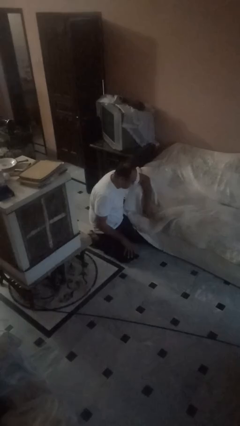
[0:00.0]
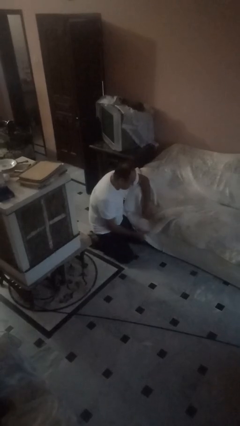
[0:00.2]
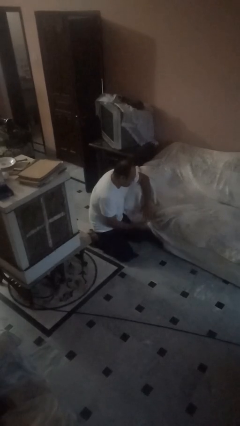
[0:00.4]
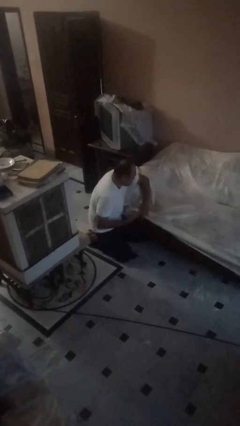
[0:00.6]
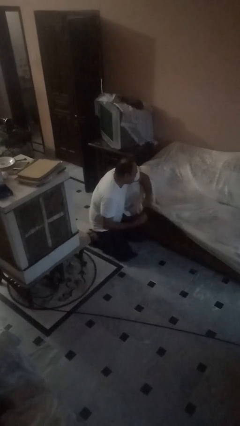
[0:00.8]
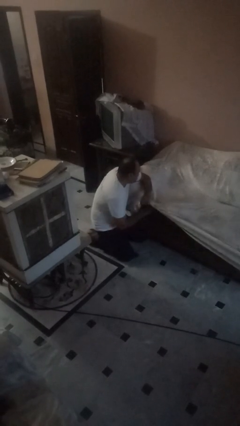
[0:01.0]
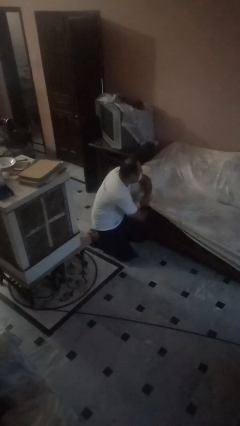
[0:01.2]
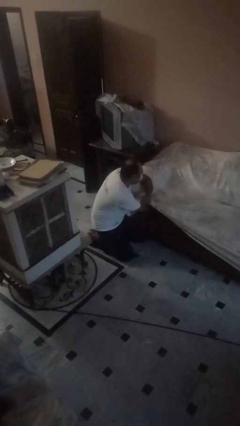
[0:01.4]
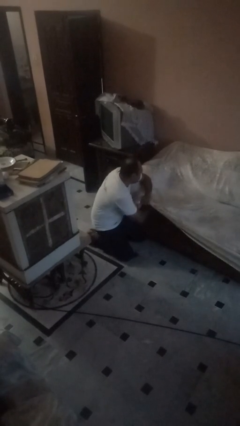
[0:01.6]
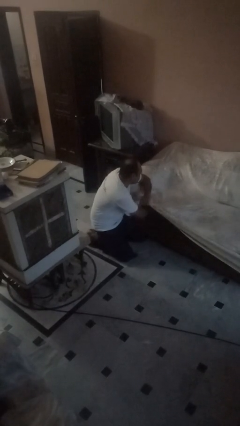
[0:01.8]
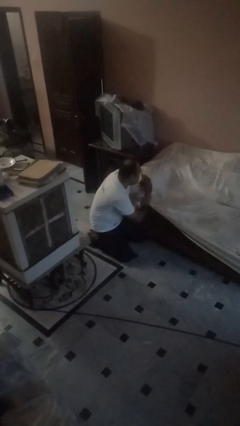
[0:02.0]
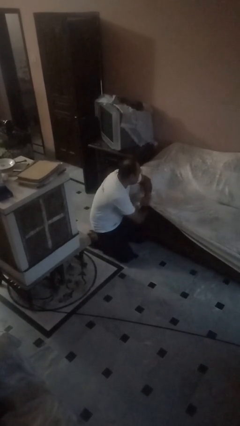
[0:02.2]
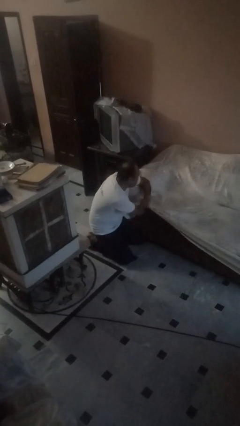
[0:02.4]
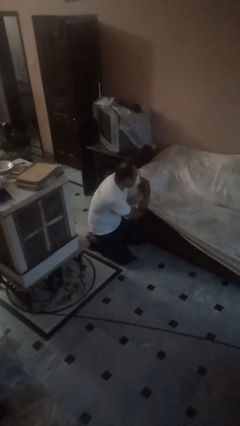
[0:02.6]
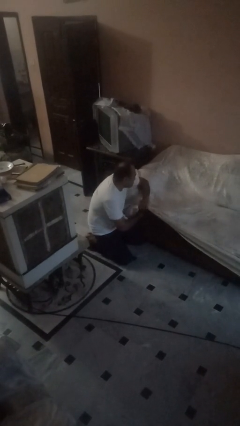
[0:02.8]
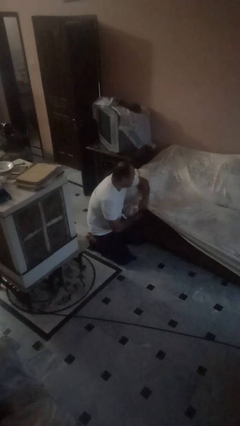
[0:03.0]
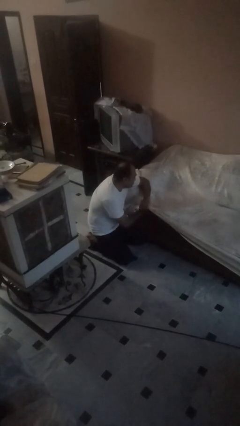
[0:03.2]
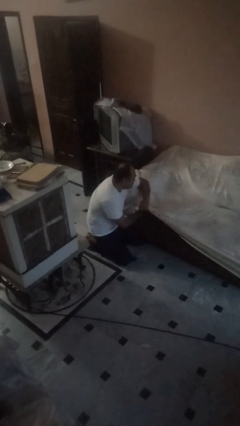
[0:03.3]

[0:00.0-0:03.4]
person searches in couch

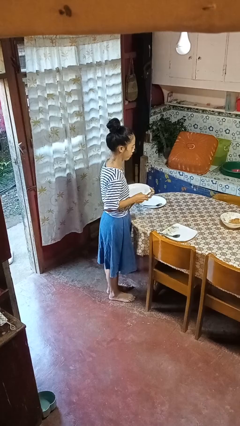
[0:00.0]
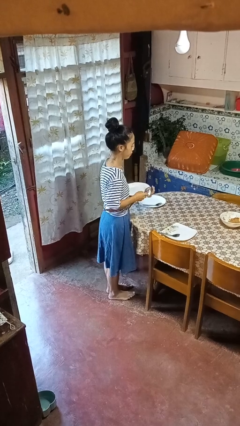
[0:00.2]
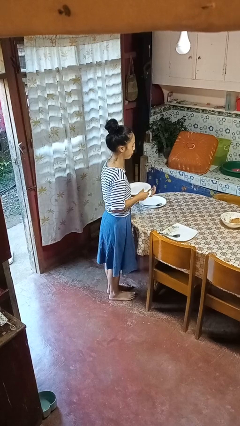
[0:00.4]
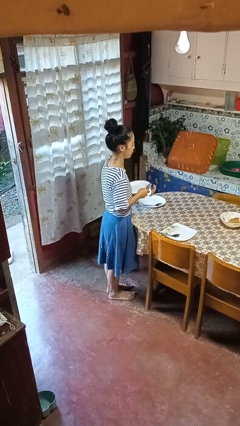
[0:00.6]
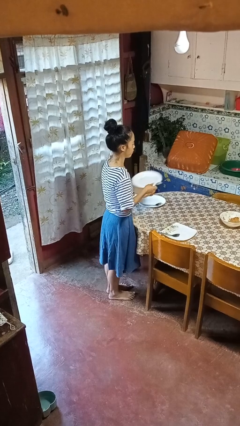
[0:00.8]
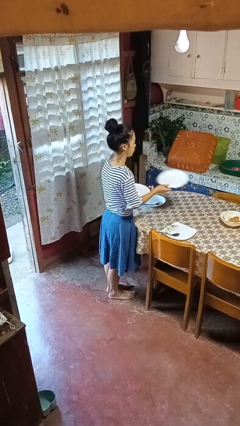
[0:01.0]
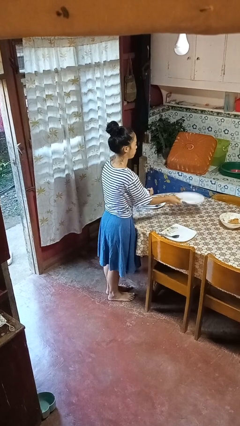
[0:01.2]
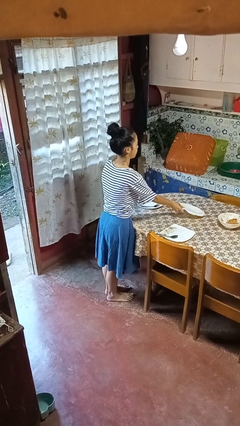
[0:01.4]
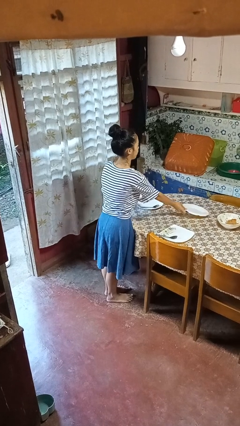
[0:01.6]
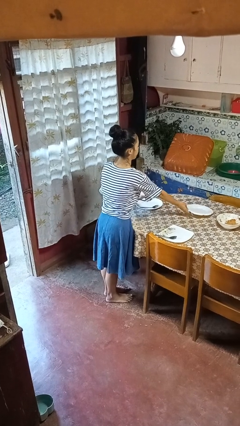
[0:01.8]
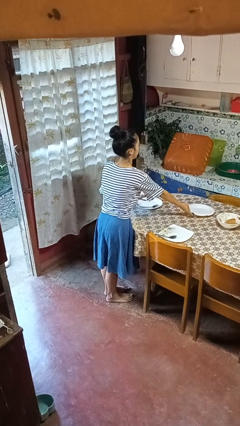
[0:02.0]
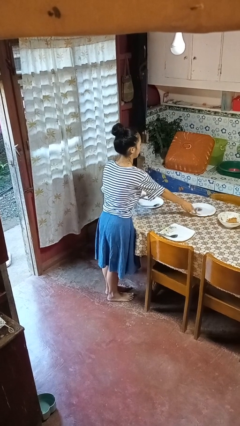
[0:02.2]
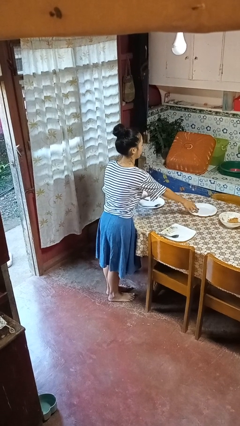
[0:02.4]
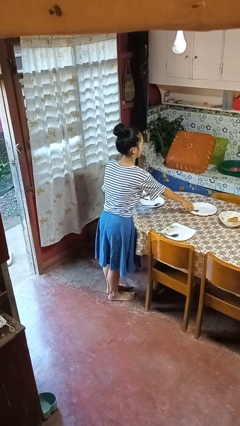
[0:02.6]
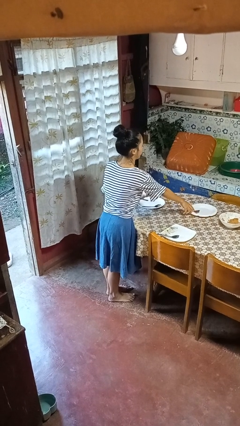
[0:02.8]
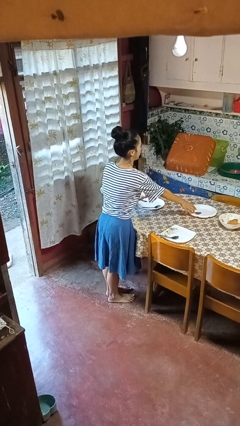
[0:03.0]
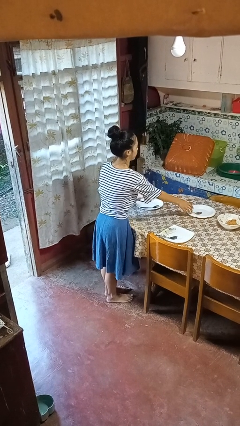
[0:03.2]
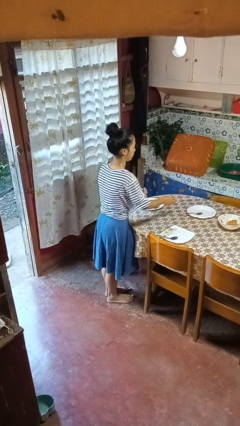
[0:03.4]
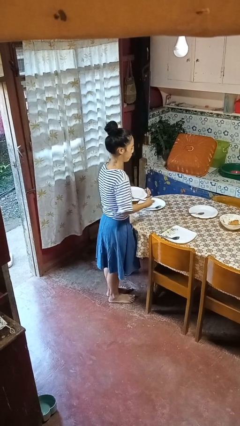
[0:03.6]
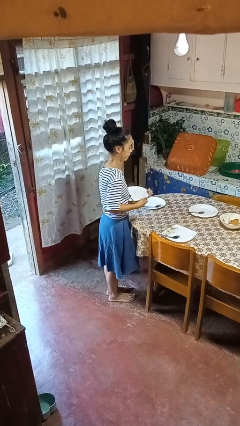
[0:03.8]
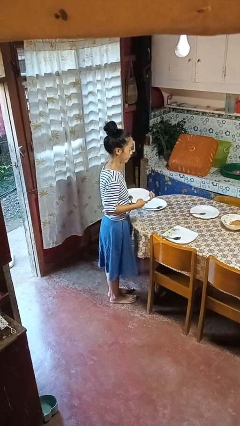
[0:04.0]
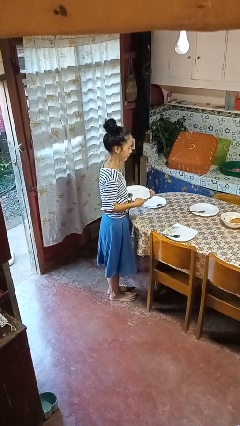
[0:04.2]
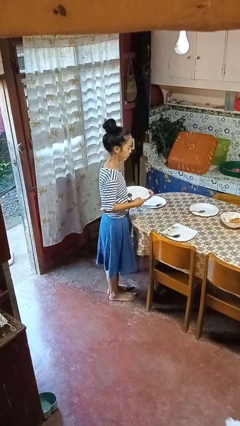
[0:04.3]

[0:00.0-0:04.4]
person sets table

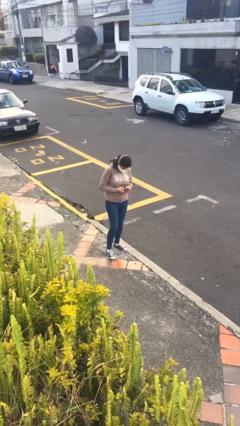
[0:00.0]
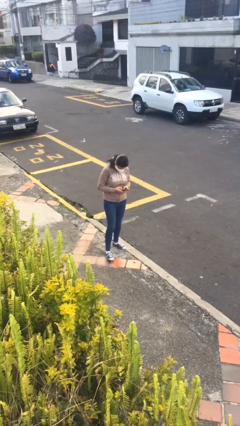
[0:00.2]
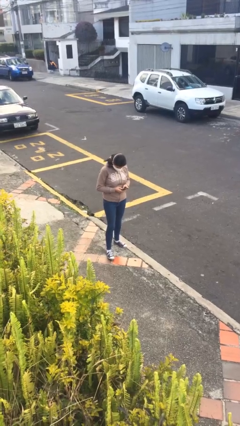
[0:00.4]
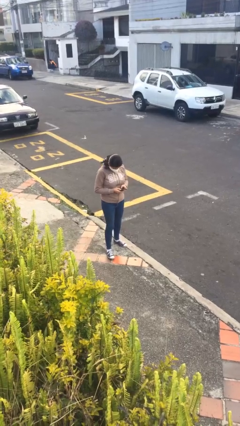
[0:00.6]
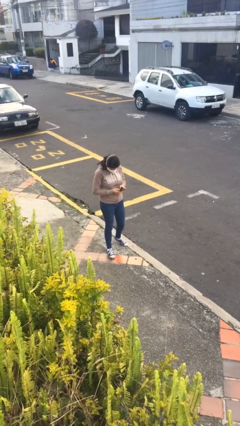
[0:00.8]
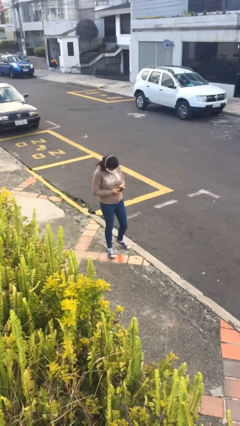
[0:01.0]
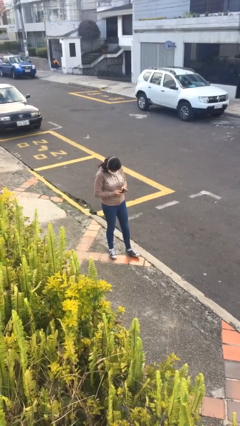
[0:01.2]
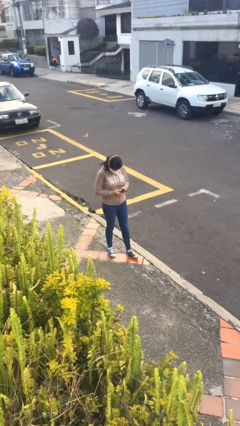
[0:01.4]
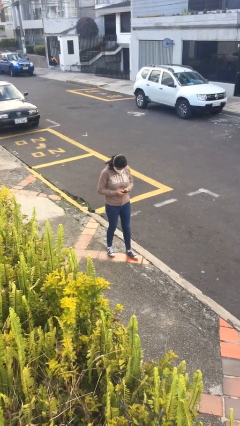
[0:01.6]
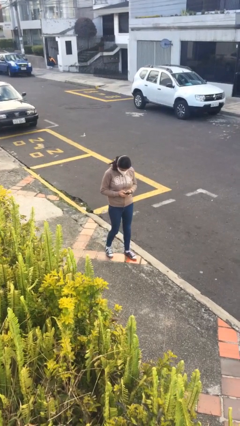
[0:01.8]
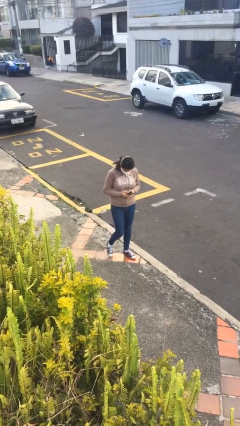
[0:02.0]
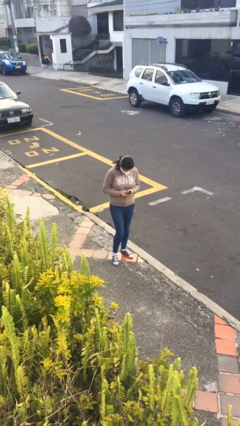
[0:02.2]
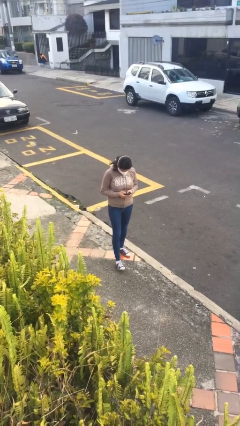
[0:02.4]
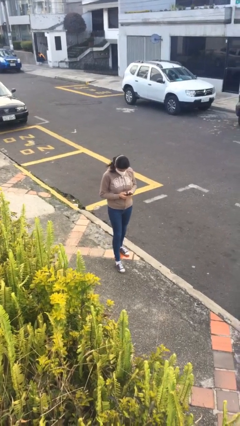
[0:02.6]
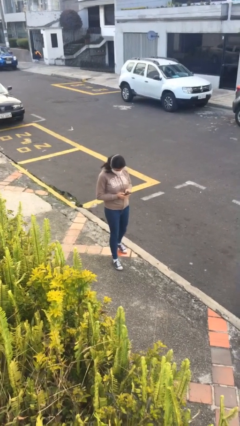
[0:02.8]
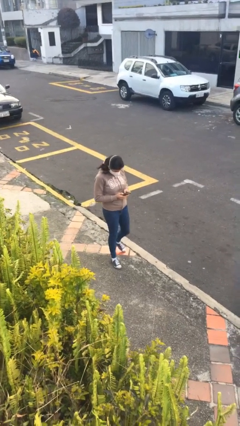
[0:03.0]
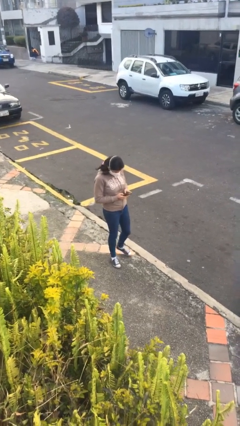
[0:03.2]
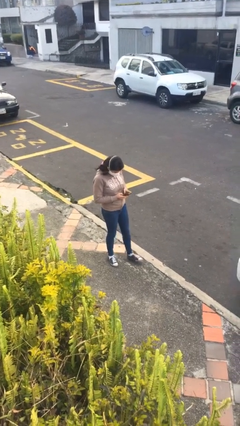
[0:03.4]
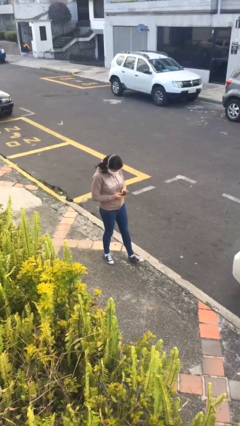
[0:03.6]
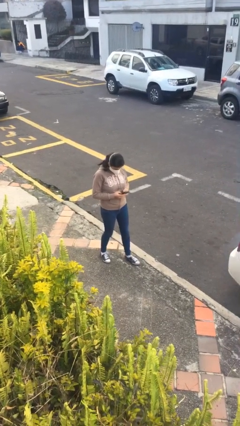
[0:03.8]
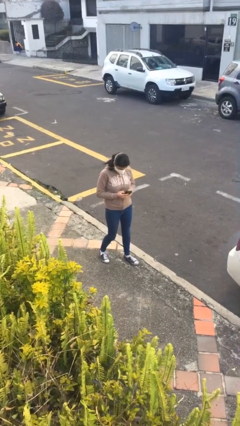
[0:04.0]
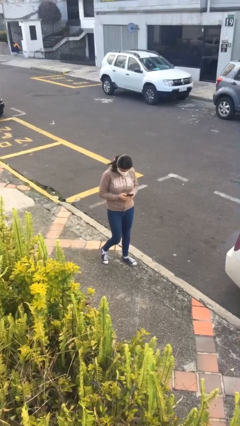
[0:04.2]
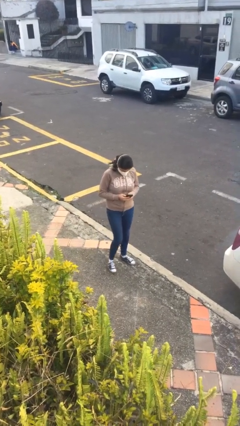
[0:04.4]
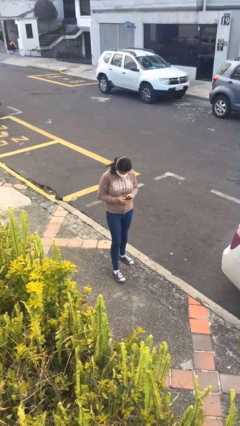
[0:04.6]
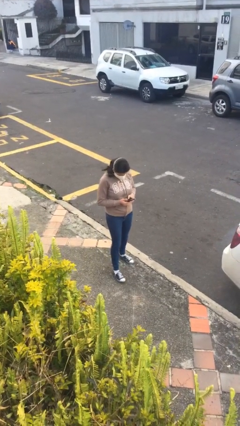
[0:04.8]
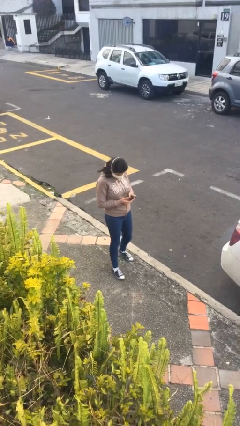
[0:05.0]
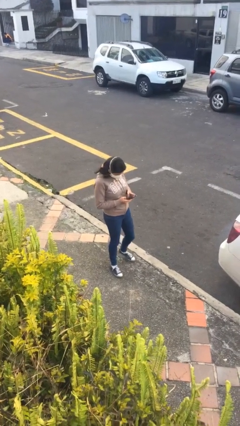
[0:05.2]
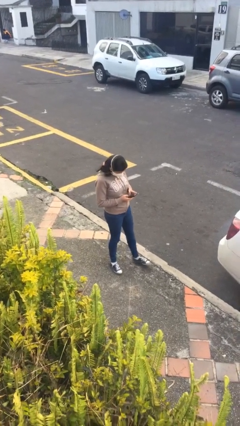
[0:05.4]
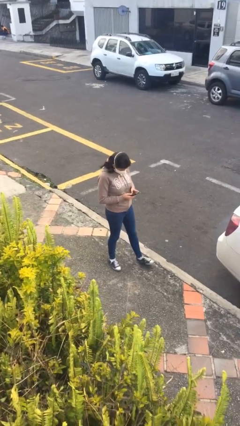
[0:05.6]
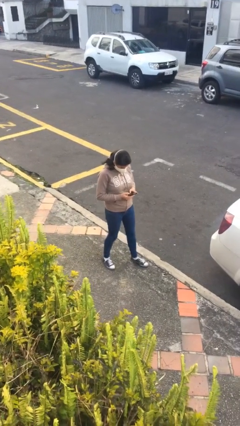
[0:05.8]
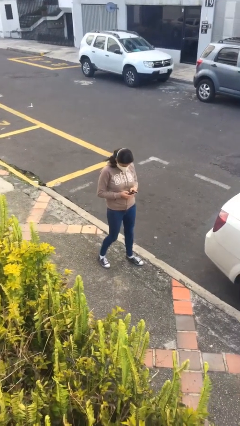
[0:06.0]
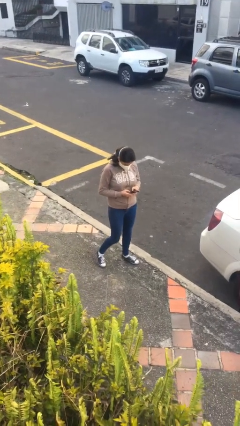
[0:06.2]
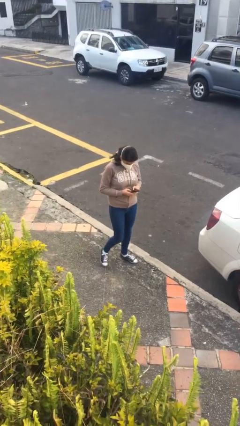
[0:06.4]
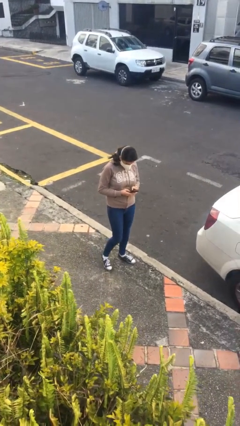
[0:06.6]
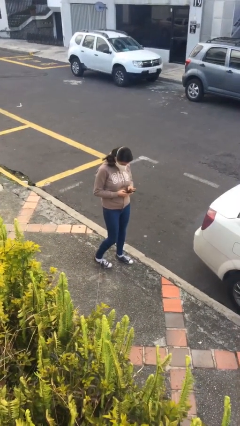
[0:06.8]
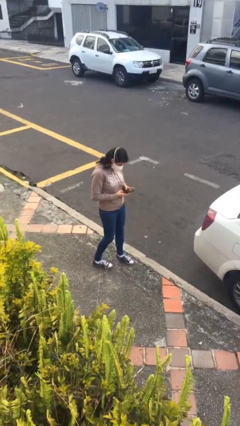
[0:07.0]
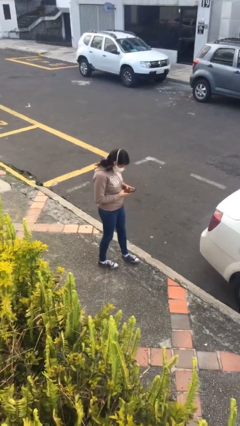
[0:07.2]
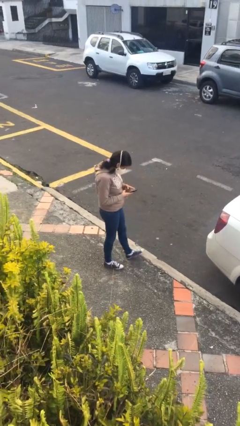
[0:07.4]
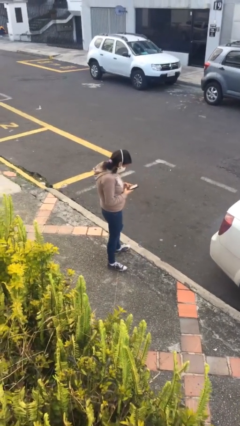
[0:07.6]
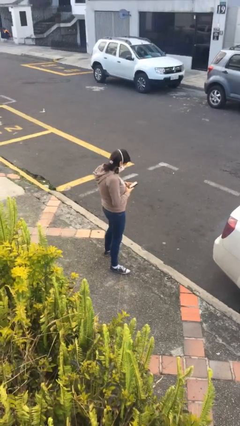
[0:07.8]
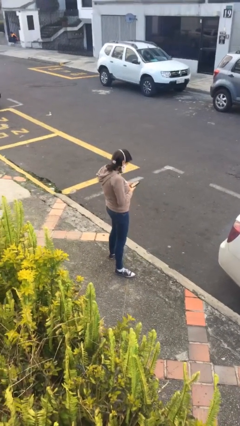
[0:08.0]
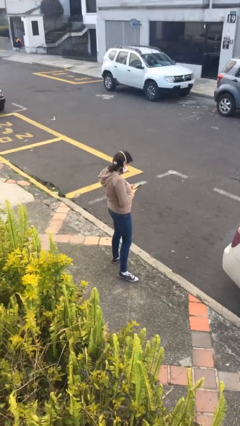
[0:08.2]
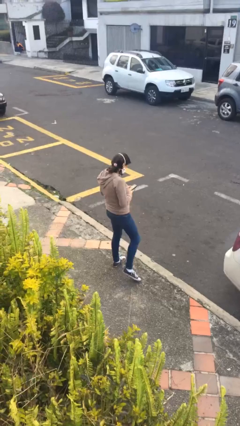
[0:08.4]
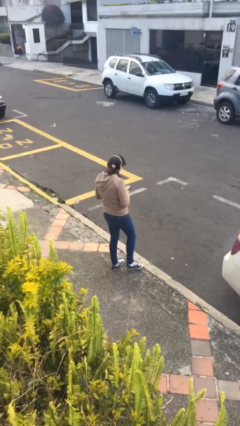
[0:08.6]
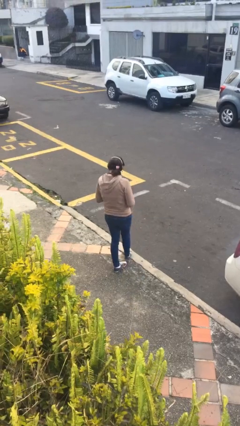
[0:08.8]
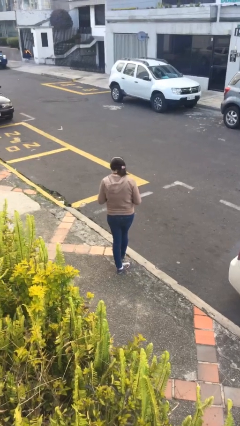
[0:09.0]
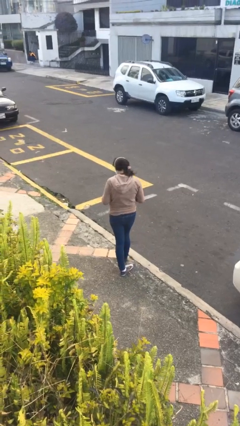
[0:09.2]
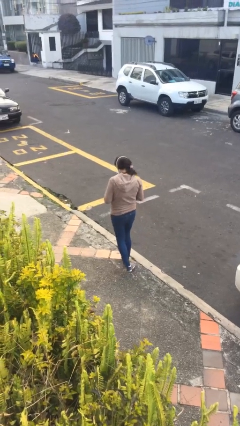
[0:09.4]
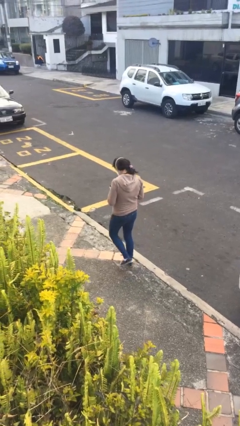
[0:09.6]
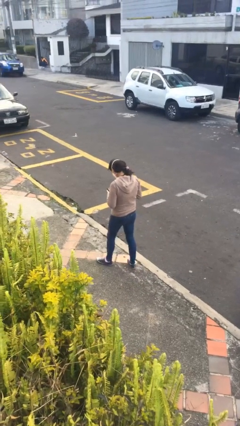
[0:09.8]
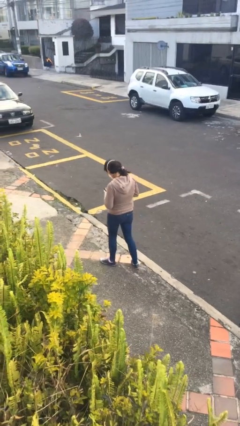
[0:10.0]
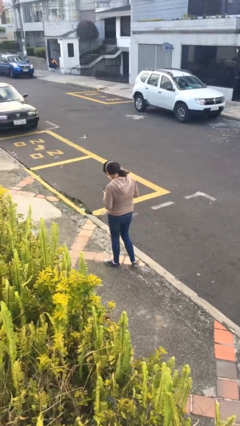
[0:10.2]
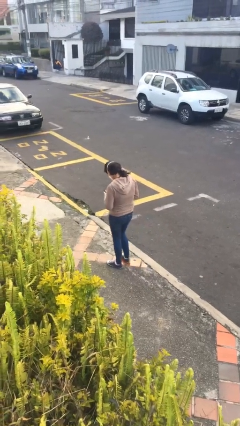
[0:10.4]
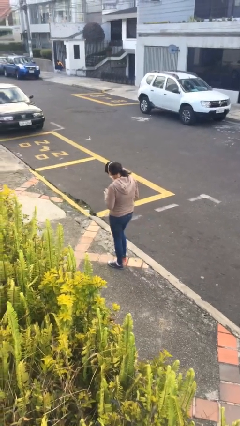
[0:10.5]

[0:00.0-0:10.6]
person texts on phone
